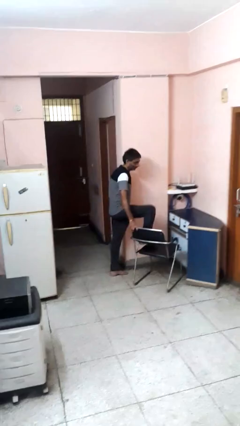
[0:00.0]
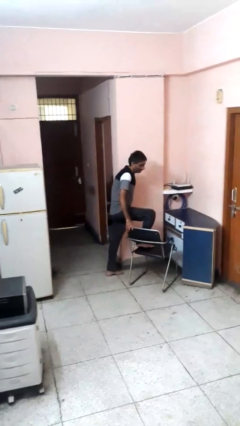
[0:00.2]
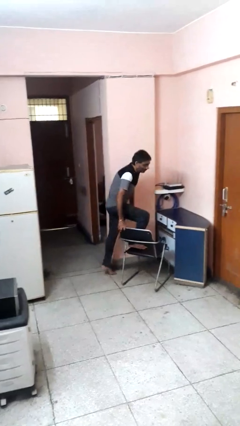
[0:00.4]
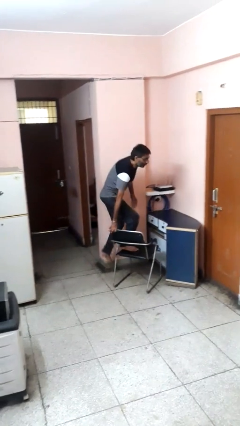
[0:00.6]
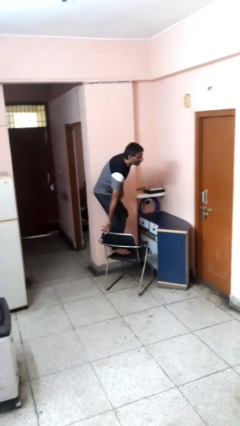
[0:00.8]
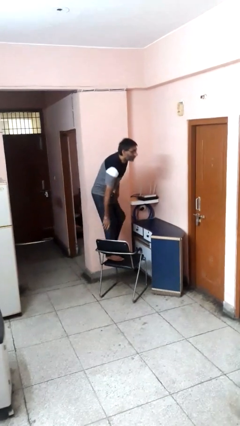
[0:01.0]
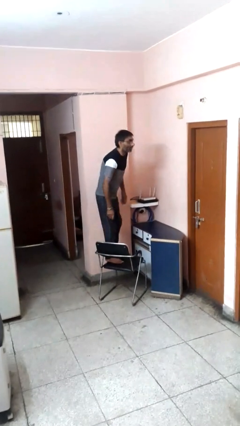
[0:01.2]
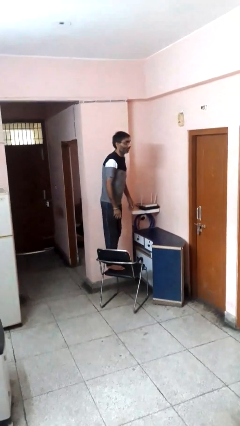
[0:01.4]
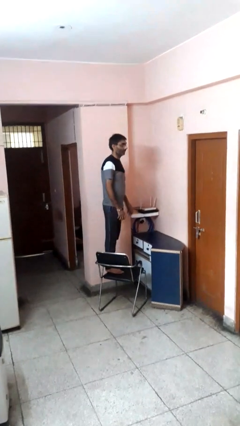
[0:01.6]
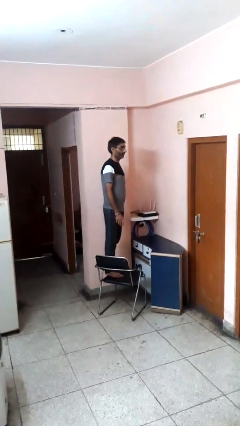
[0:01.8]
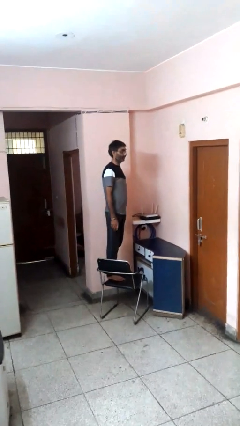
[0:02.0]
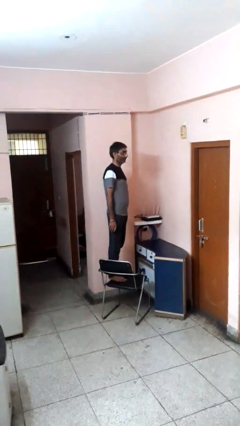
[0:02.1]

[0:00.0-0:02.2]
person climbs on chair

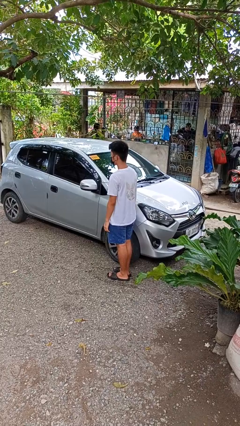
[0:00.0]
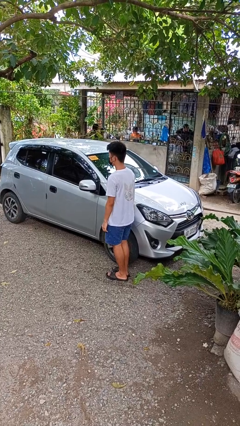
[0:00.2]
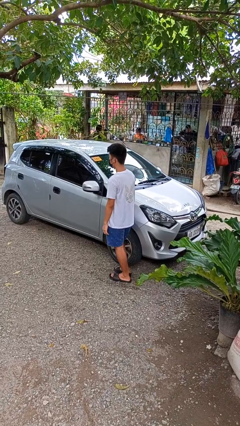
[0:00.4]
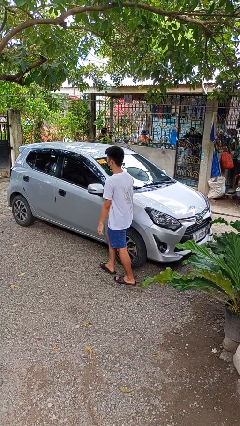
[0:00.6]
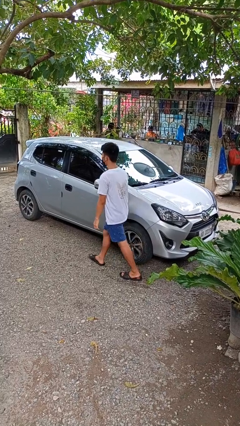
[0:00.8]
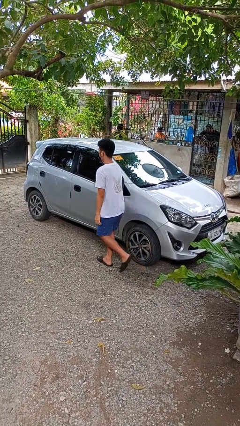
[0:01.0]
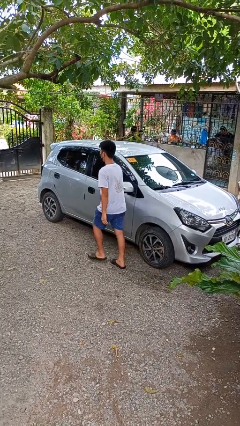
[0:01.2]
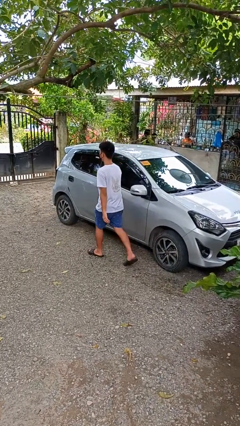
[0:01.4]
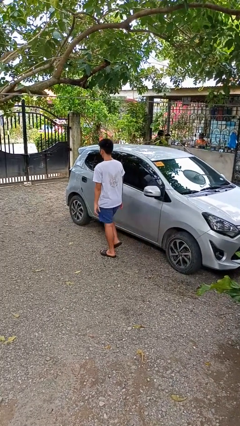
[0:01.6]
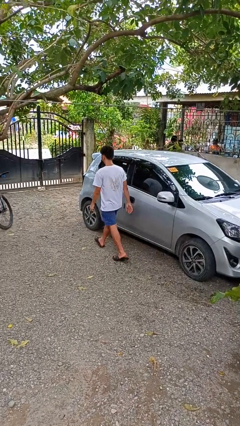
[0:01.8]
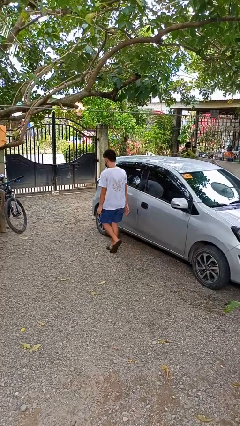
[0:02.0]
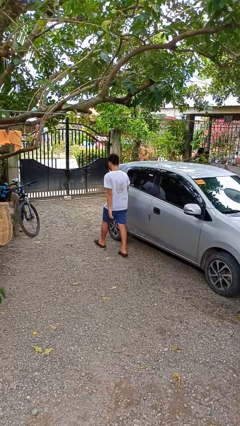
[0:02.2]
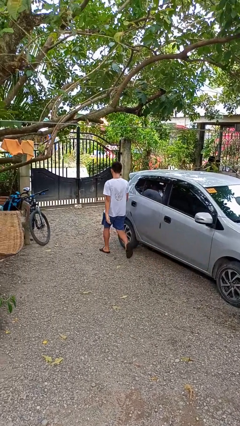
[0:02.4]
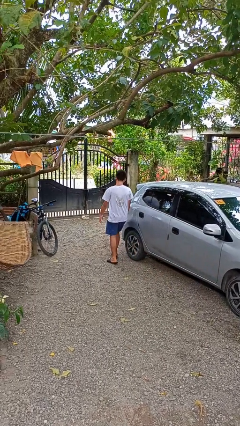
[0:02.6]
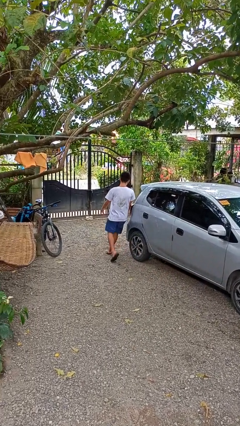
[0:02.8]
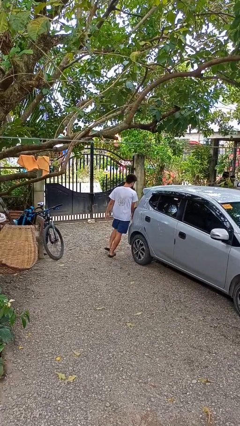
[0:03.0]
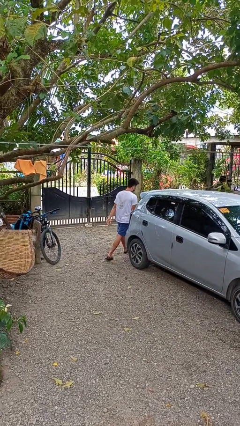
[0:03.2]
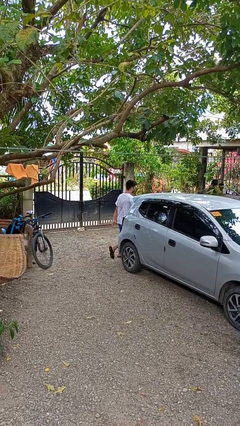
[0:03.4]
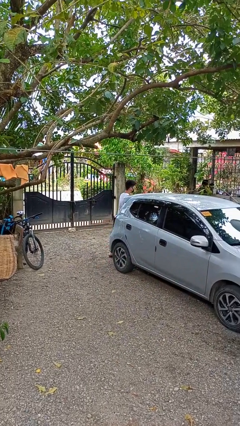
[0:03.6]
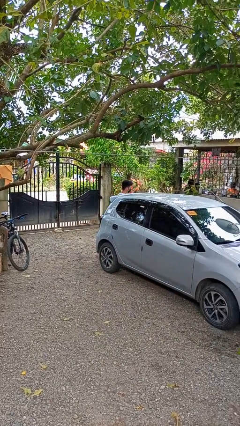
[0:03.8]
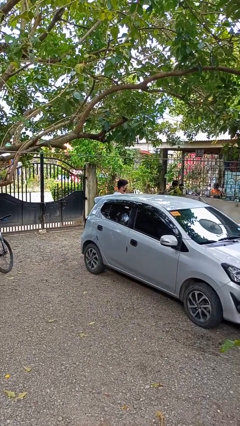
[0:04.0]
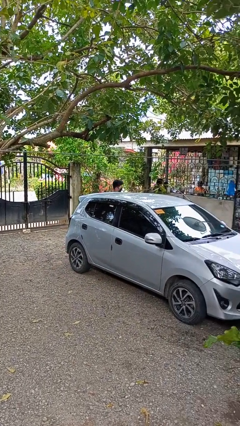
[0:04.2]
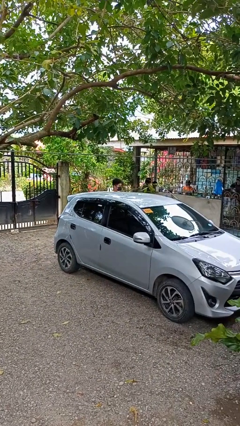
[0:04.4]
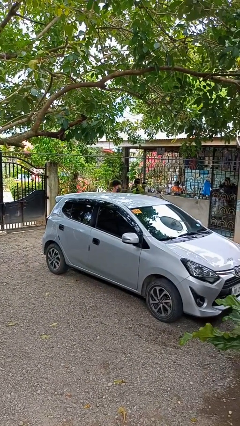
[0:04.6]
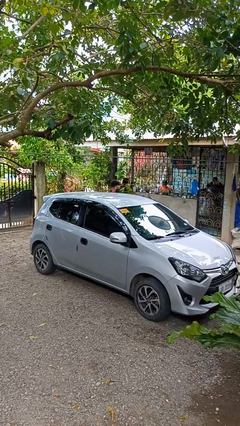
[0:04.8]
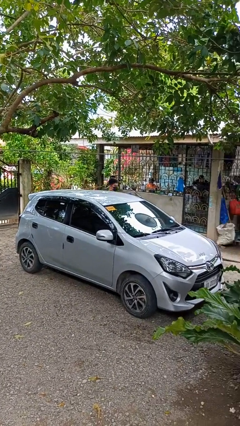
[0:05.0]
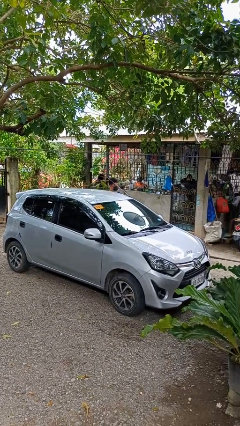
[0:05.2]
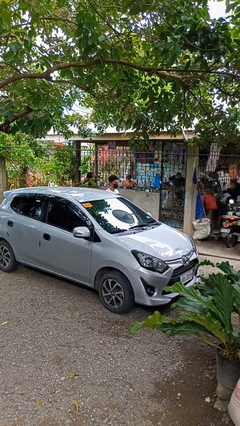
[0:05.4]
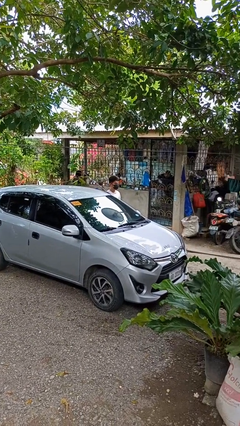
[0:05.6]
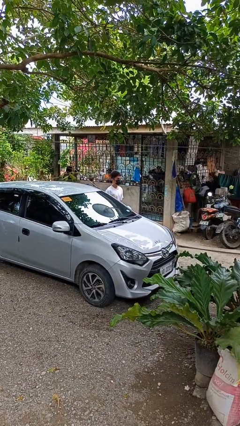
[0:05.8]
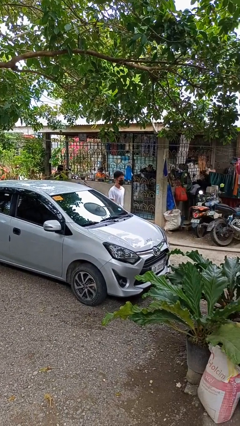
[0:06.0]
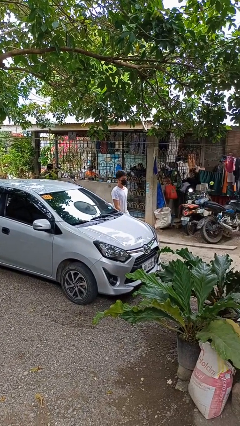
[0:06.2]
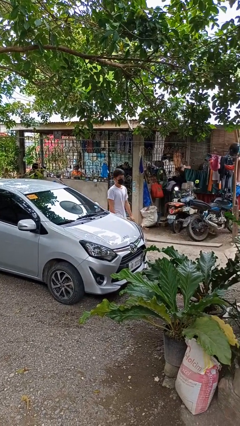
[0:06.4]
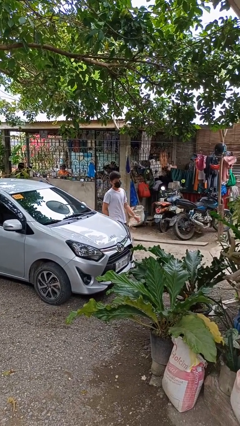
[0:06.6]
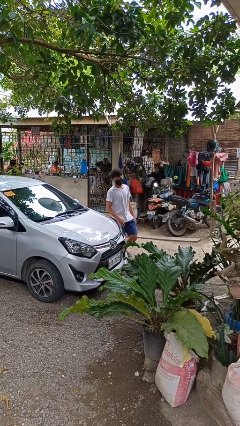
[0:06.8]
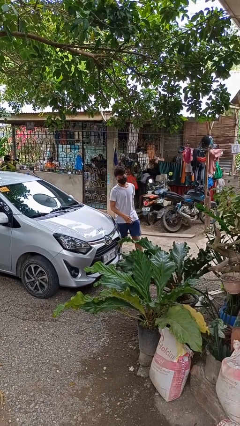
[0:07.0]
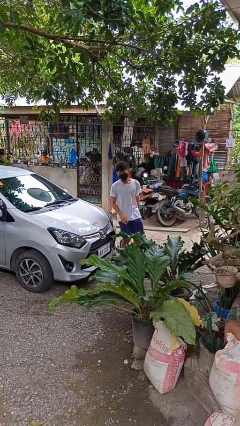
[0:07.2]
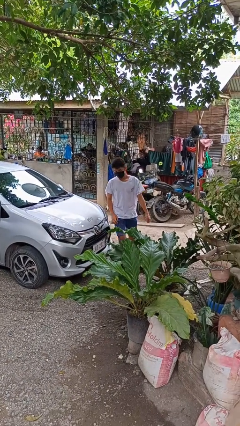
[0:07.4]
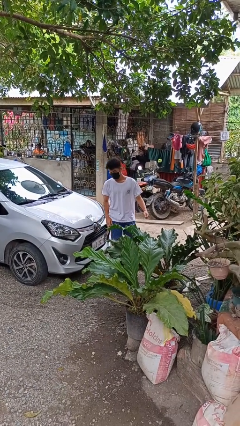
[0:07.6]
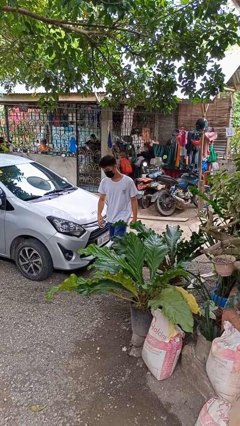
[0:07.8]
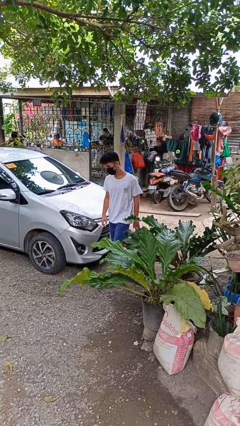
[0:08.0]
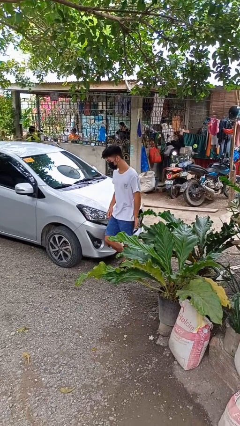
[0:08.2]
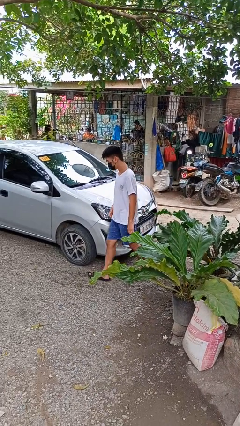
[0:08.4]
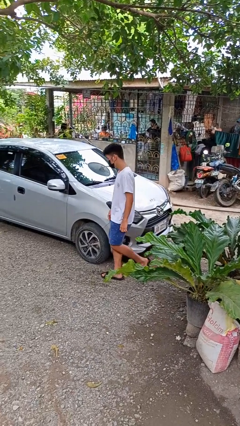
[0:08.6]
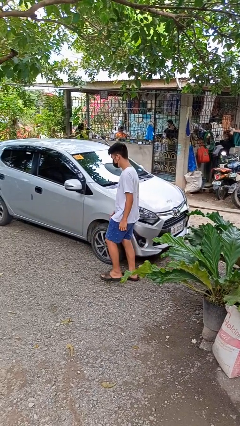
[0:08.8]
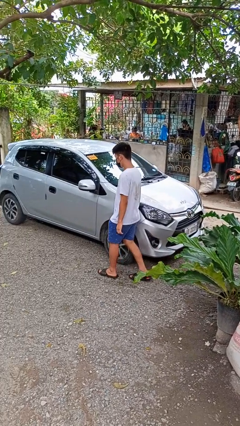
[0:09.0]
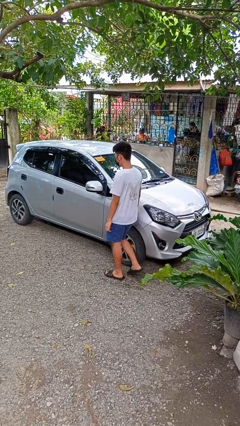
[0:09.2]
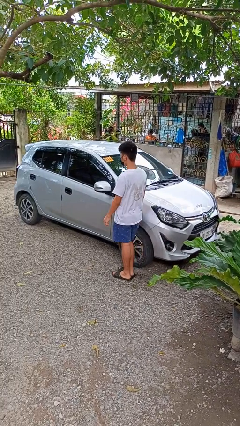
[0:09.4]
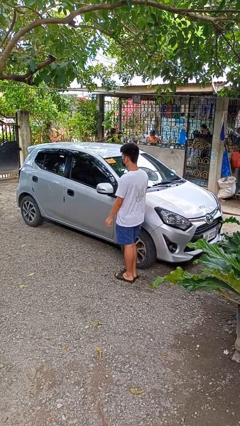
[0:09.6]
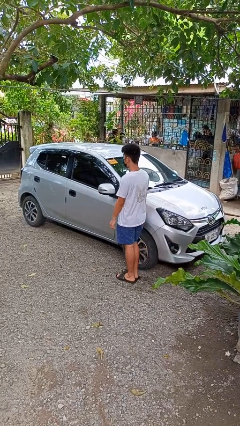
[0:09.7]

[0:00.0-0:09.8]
person walks around car

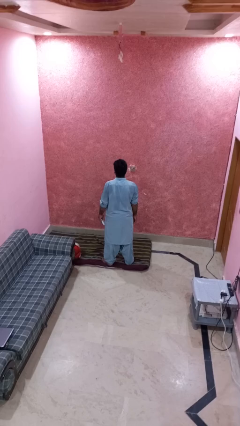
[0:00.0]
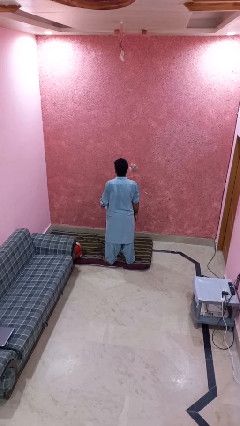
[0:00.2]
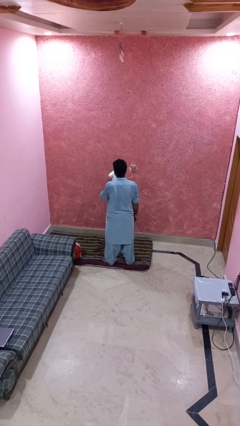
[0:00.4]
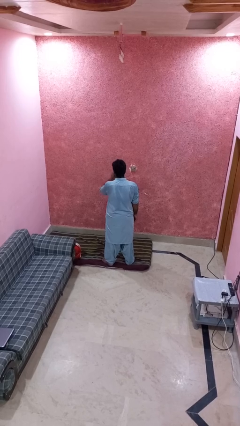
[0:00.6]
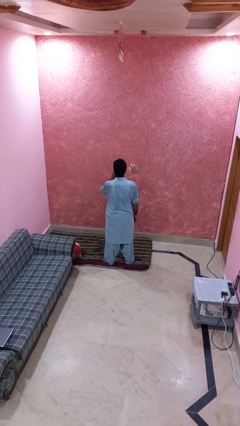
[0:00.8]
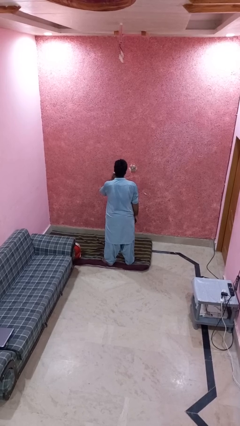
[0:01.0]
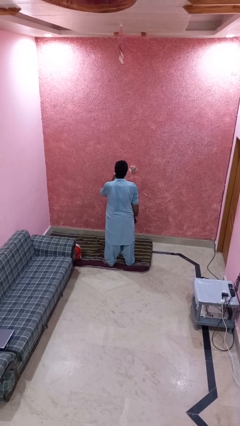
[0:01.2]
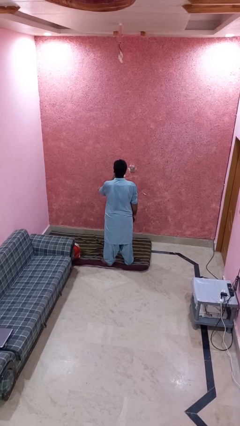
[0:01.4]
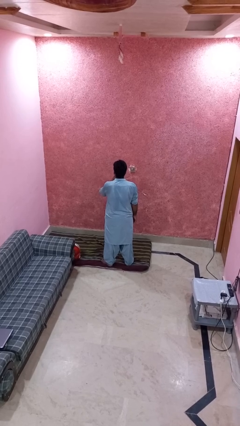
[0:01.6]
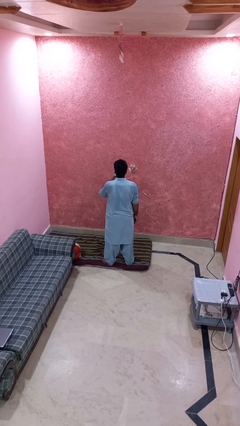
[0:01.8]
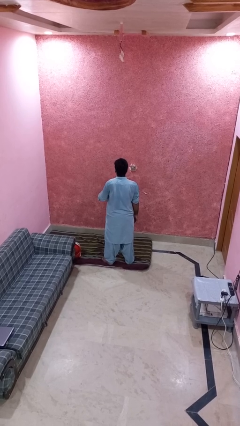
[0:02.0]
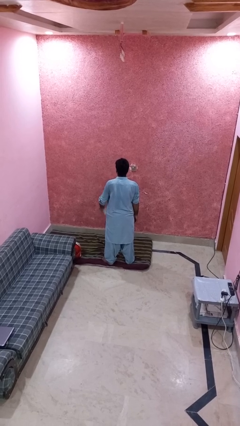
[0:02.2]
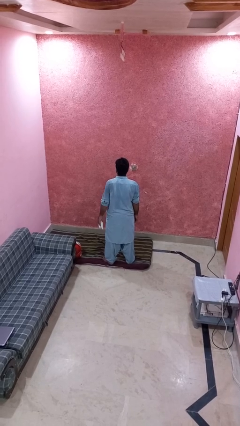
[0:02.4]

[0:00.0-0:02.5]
person wipes mouth with napkin

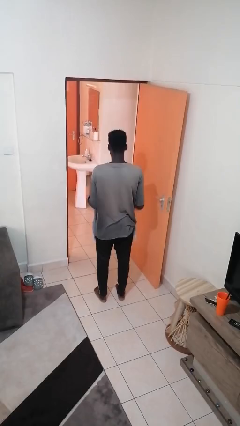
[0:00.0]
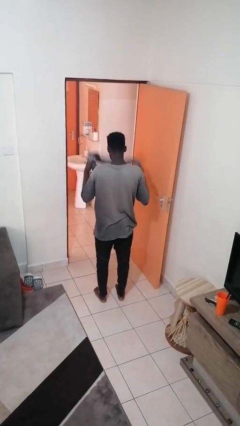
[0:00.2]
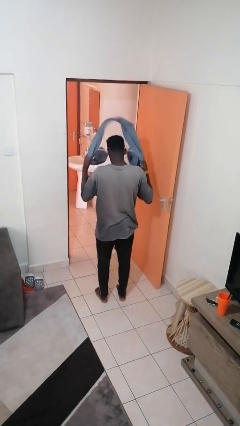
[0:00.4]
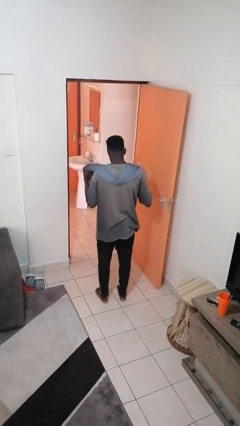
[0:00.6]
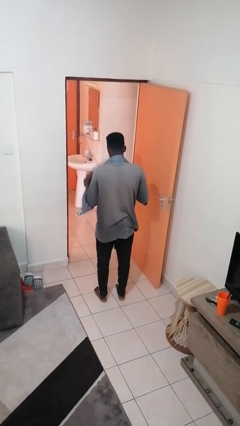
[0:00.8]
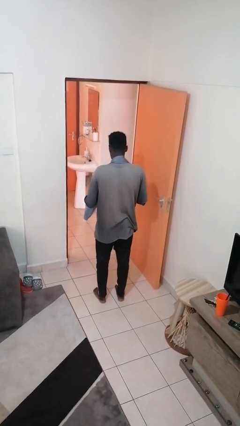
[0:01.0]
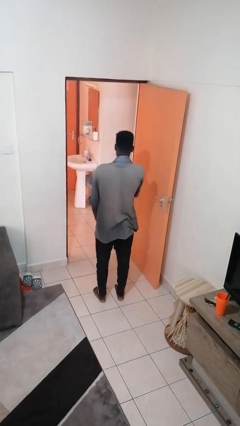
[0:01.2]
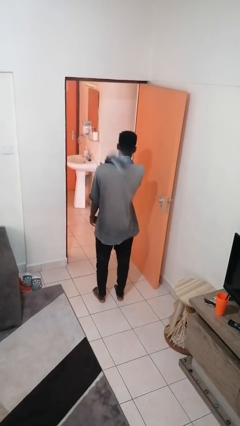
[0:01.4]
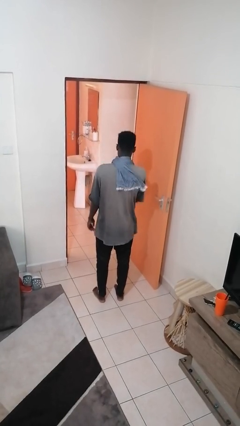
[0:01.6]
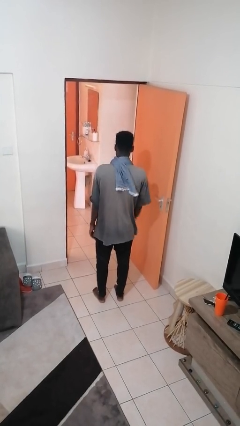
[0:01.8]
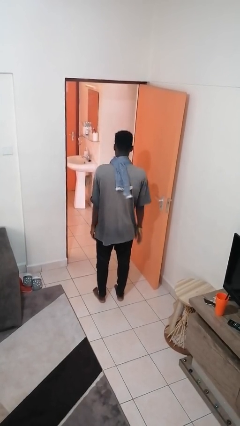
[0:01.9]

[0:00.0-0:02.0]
person puts on scarf

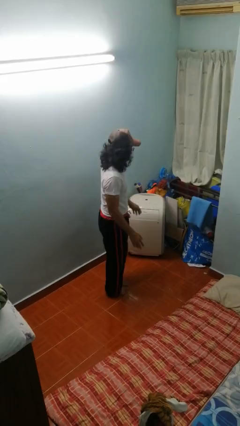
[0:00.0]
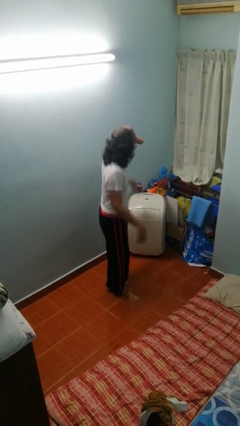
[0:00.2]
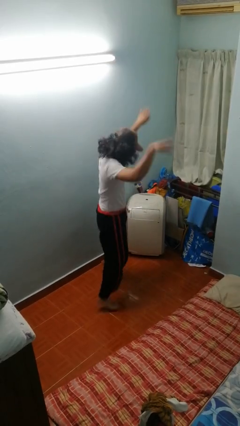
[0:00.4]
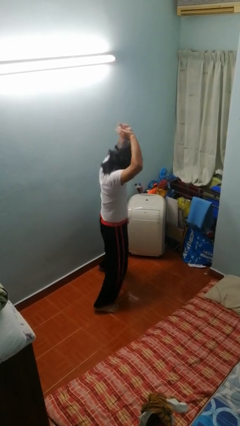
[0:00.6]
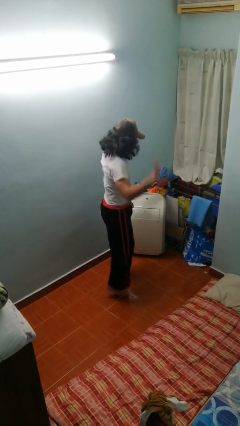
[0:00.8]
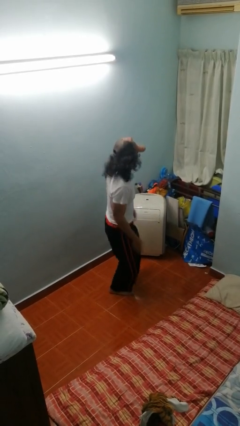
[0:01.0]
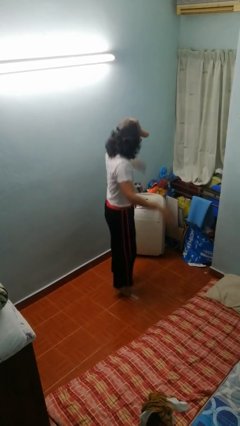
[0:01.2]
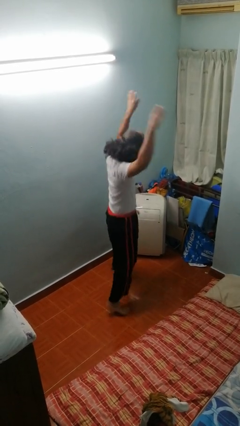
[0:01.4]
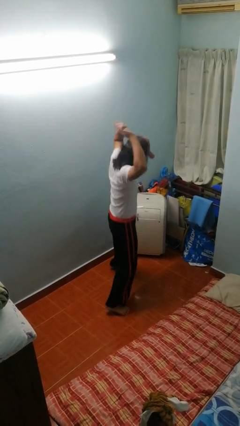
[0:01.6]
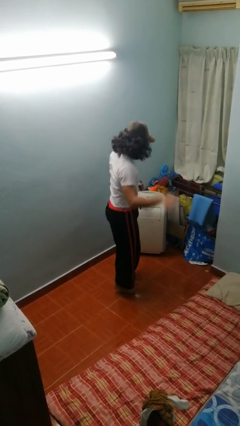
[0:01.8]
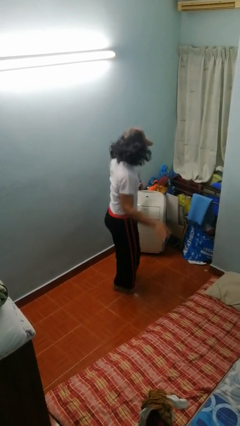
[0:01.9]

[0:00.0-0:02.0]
person exercises with jumping jacks
